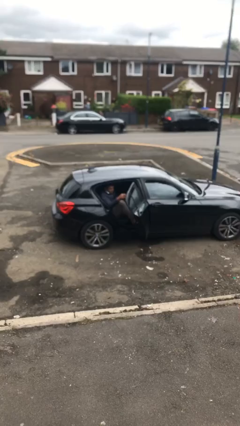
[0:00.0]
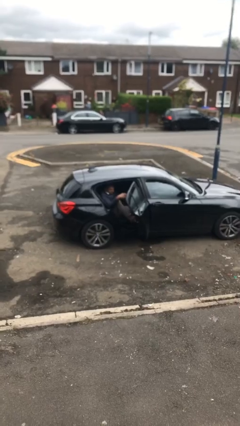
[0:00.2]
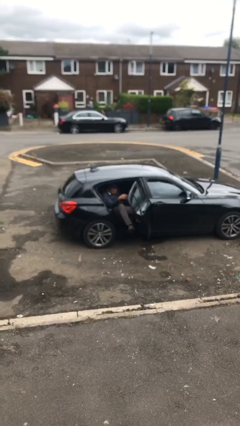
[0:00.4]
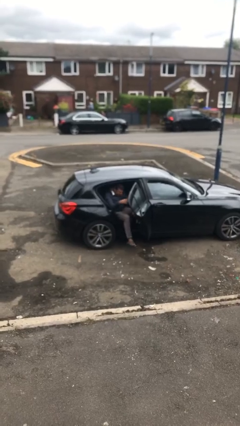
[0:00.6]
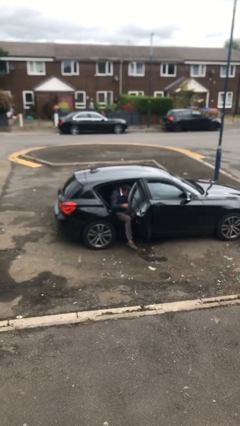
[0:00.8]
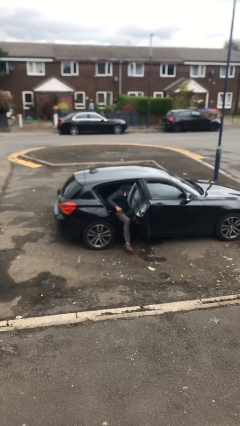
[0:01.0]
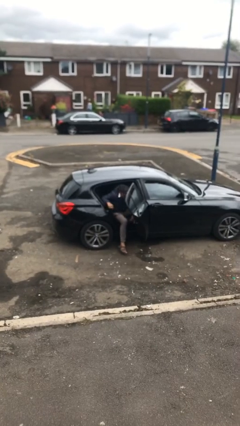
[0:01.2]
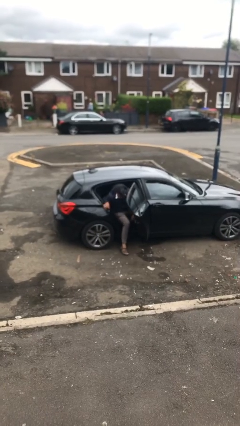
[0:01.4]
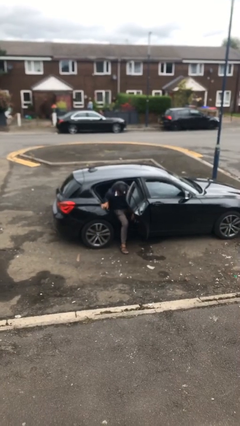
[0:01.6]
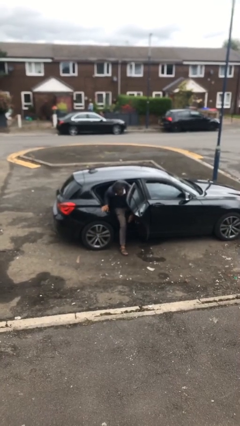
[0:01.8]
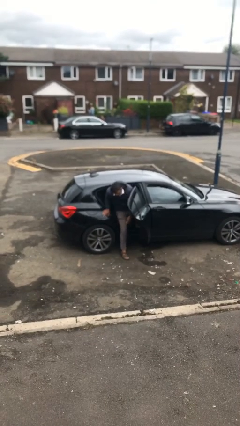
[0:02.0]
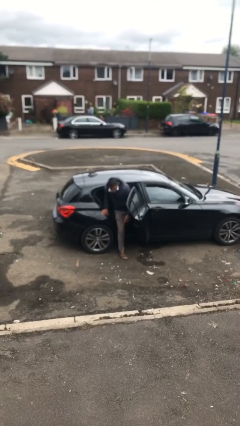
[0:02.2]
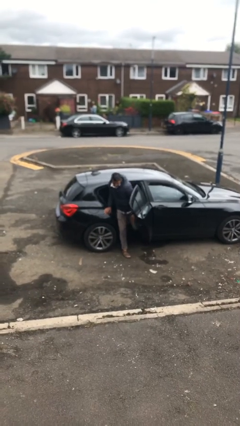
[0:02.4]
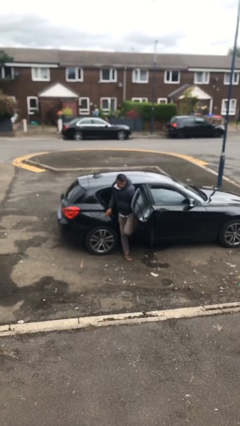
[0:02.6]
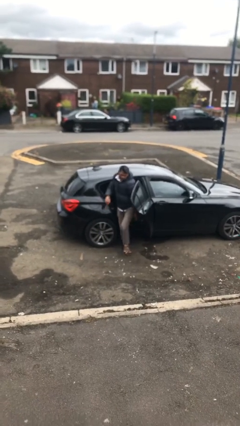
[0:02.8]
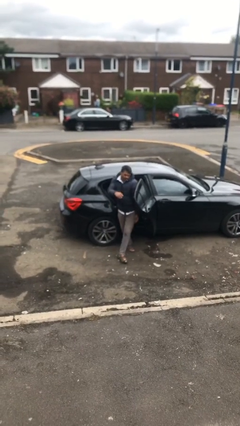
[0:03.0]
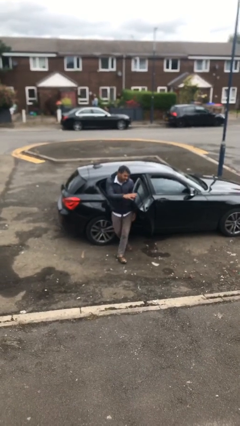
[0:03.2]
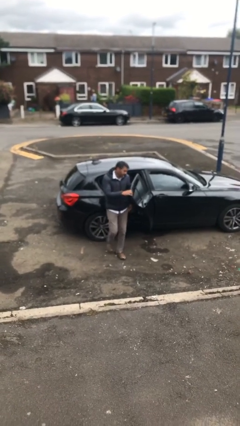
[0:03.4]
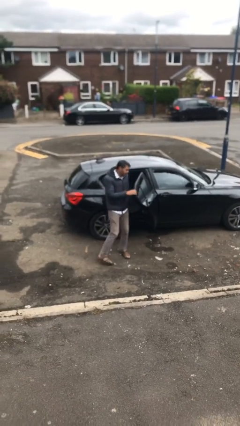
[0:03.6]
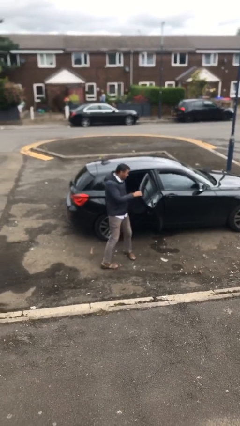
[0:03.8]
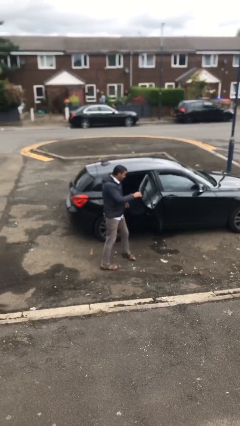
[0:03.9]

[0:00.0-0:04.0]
person exits car

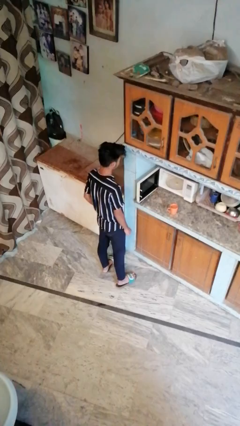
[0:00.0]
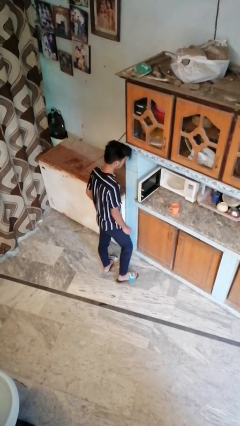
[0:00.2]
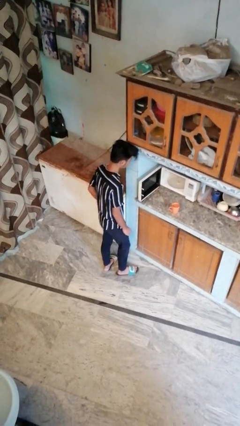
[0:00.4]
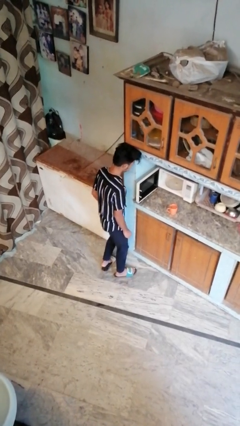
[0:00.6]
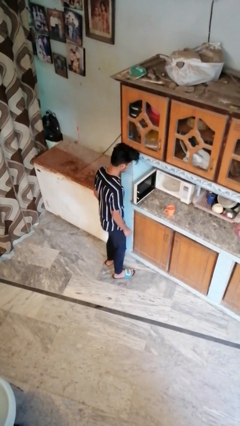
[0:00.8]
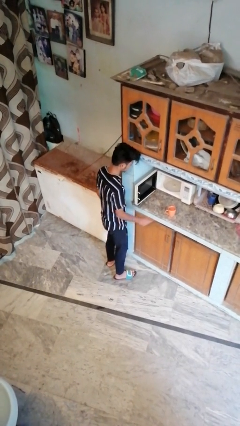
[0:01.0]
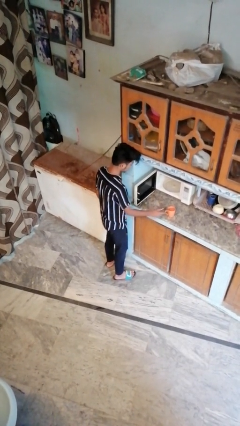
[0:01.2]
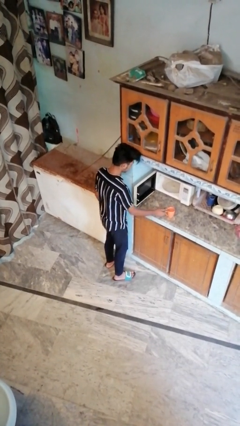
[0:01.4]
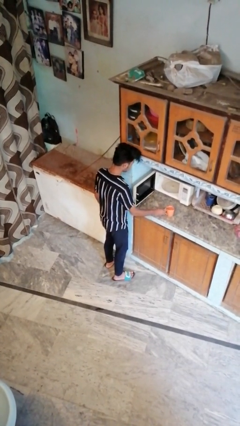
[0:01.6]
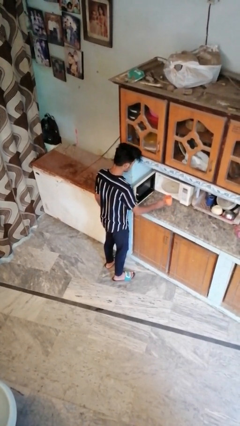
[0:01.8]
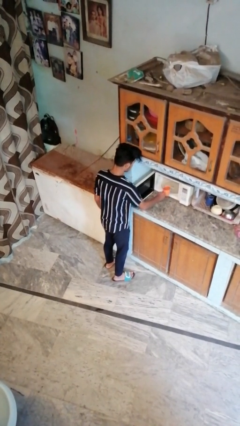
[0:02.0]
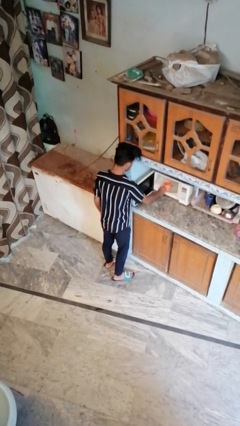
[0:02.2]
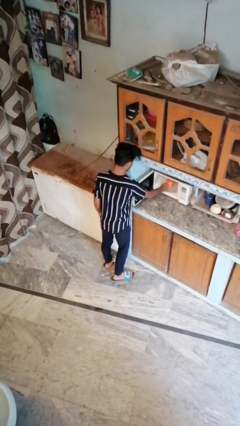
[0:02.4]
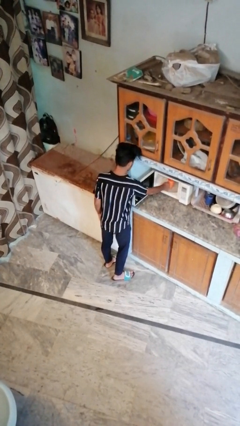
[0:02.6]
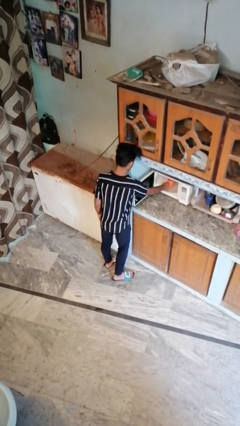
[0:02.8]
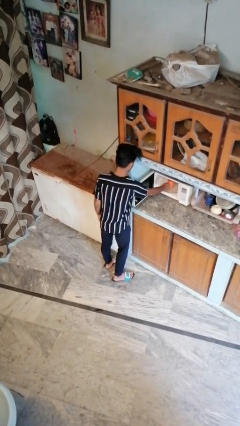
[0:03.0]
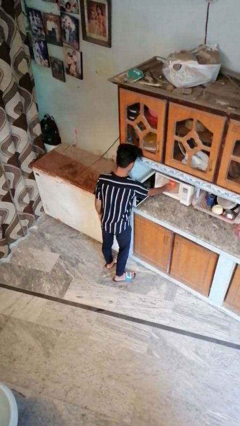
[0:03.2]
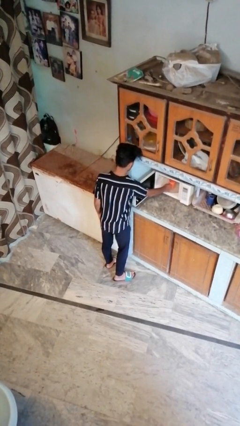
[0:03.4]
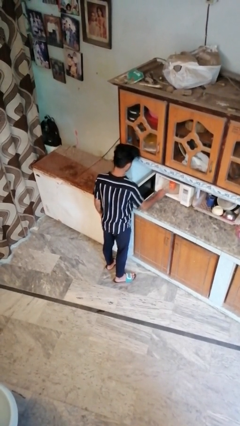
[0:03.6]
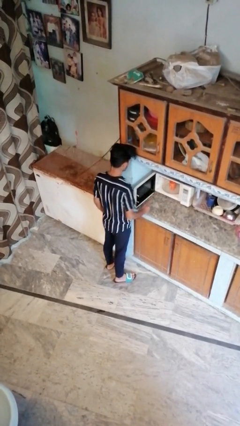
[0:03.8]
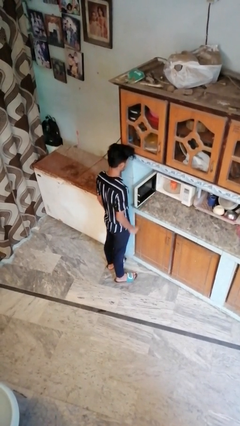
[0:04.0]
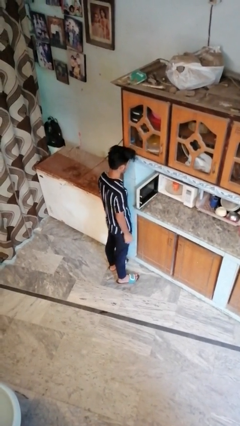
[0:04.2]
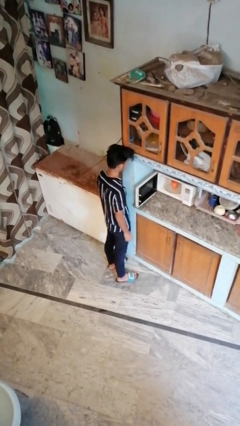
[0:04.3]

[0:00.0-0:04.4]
person puts object into microwave

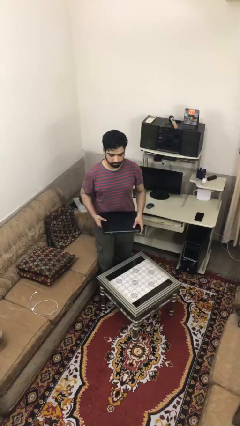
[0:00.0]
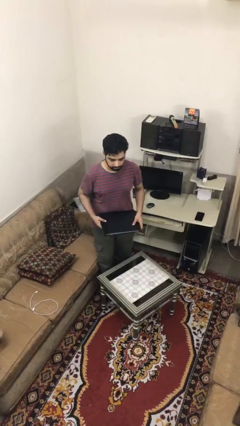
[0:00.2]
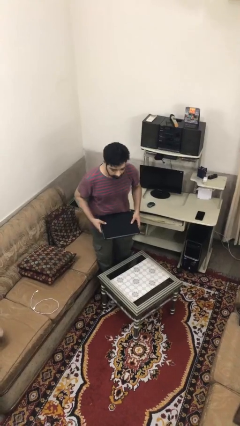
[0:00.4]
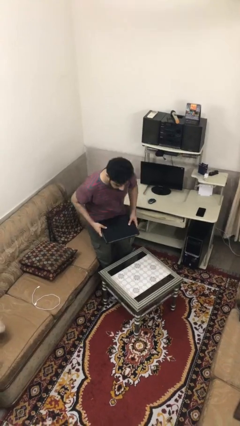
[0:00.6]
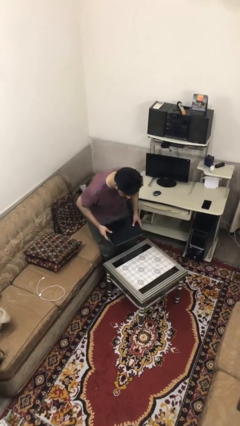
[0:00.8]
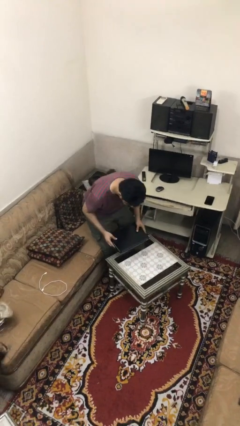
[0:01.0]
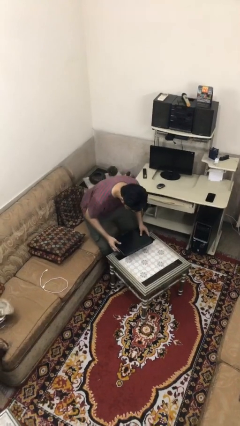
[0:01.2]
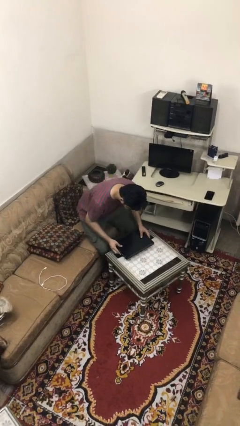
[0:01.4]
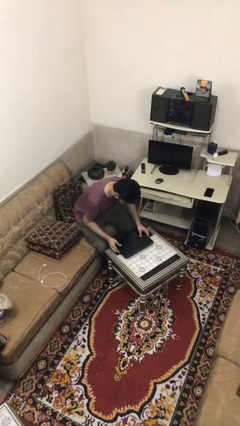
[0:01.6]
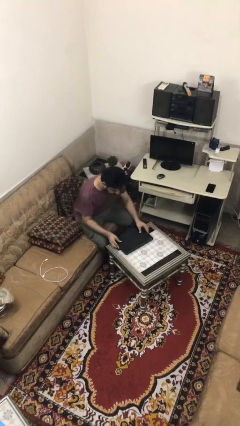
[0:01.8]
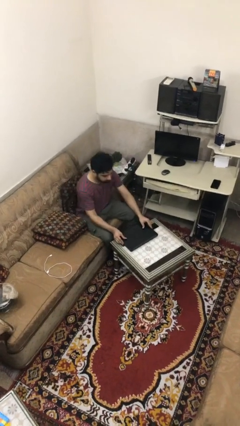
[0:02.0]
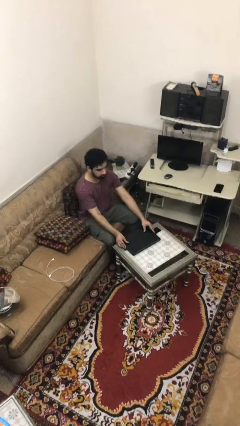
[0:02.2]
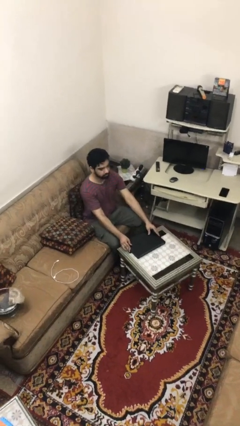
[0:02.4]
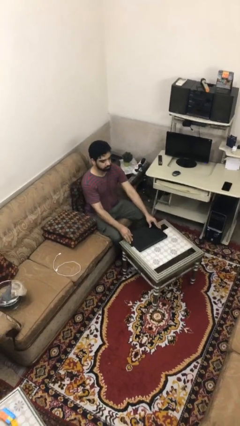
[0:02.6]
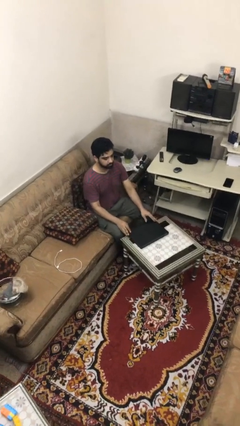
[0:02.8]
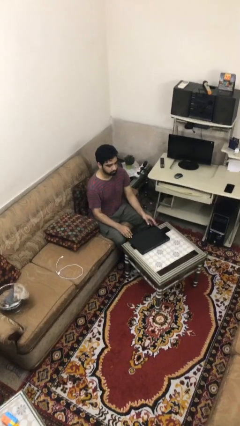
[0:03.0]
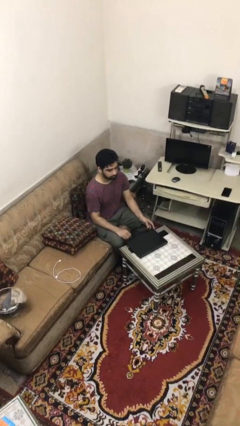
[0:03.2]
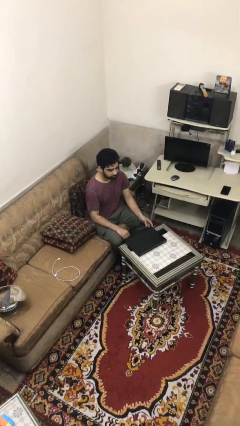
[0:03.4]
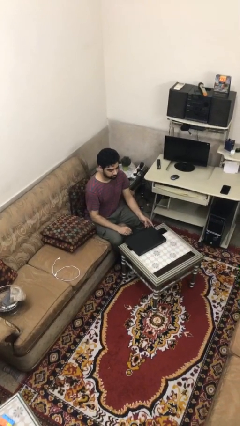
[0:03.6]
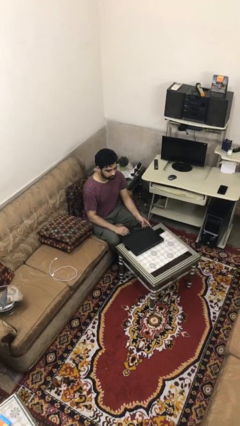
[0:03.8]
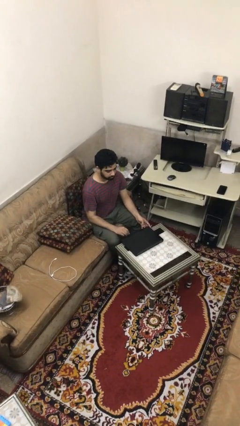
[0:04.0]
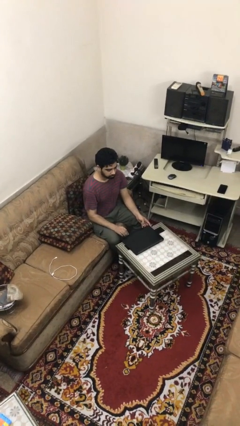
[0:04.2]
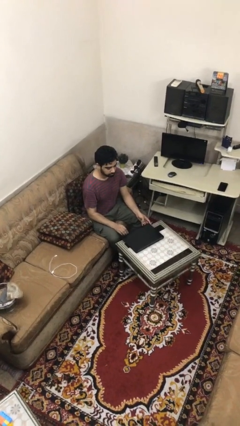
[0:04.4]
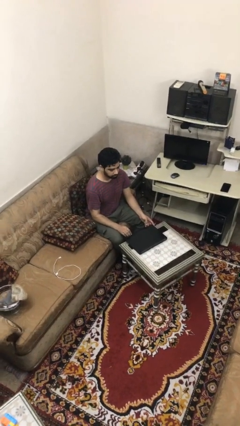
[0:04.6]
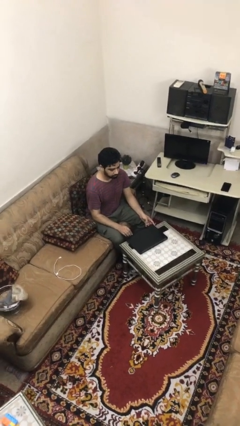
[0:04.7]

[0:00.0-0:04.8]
person sits down

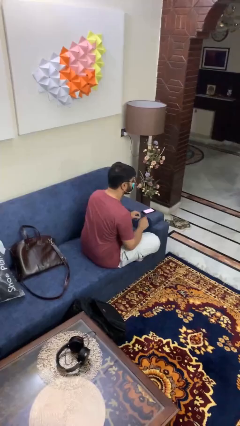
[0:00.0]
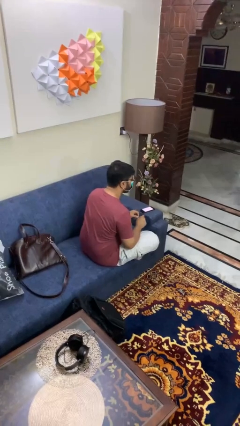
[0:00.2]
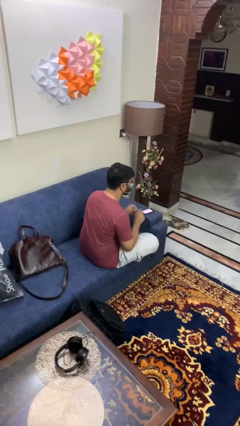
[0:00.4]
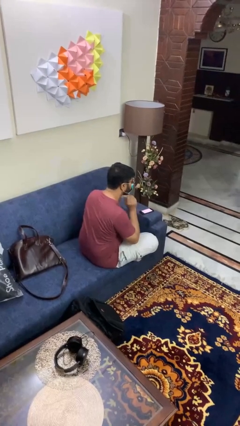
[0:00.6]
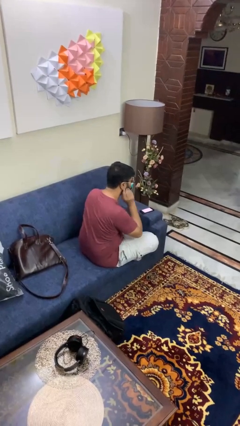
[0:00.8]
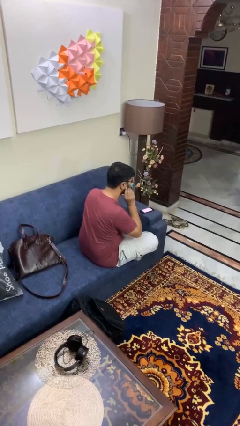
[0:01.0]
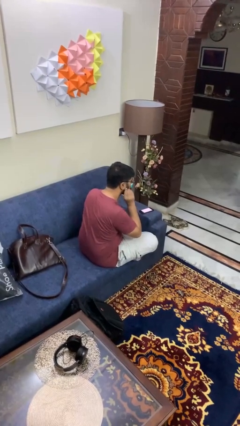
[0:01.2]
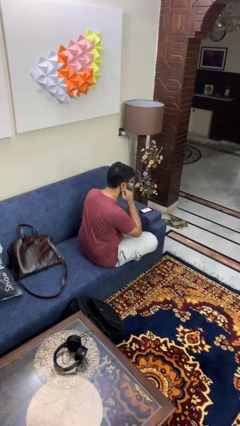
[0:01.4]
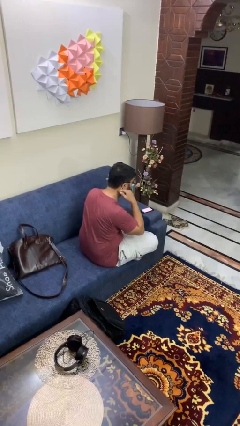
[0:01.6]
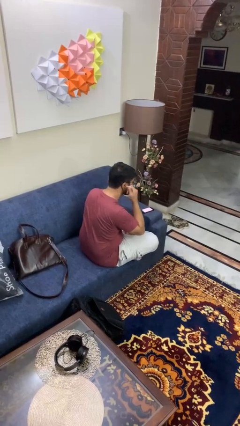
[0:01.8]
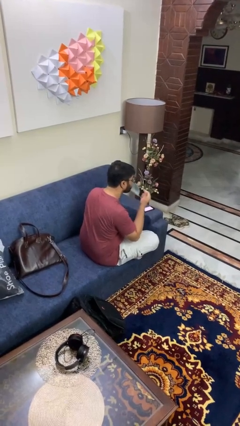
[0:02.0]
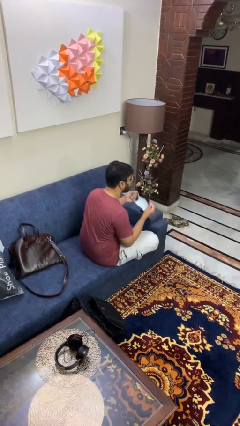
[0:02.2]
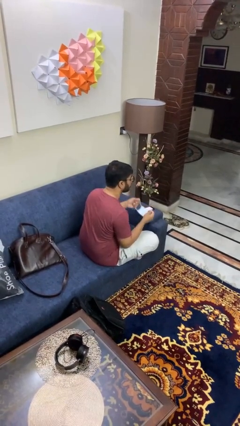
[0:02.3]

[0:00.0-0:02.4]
person takes off facemask

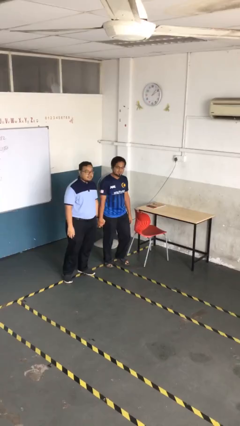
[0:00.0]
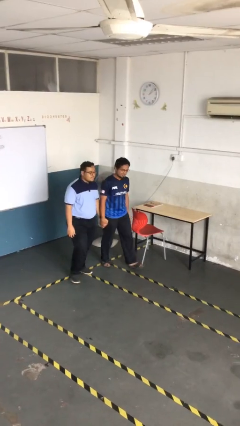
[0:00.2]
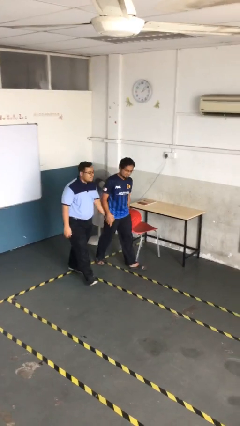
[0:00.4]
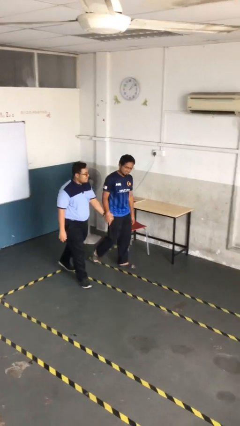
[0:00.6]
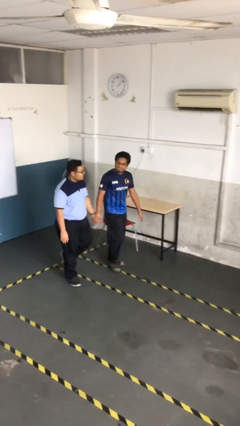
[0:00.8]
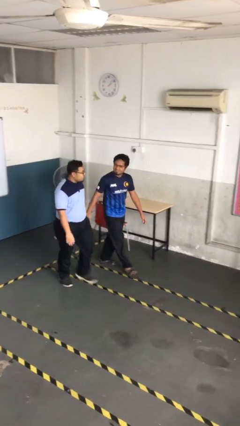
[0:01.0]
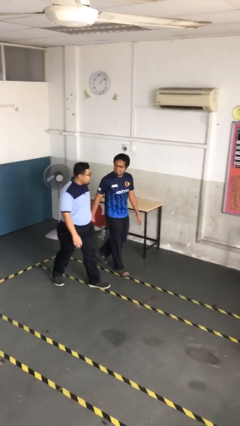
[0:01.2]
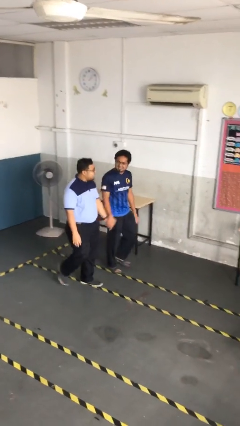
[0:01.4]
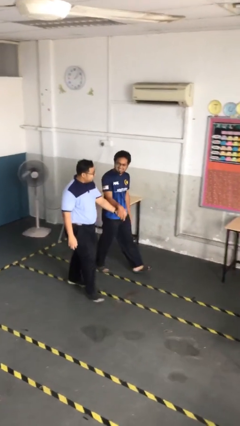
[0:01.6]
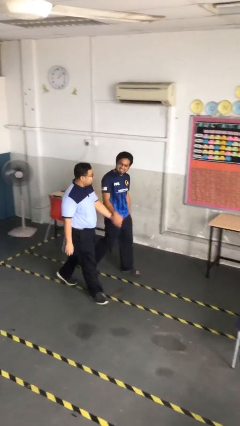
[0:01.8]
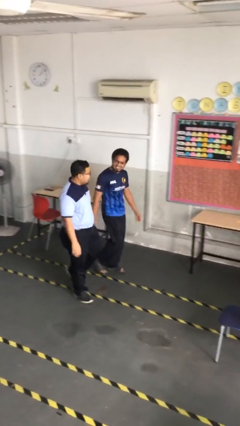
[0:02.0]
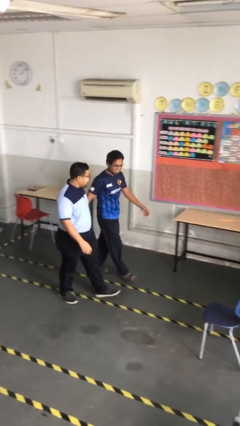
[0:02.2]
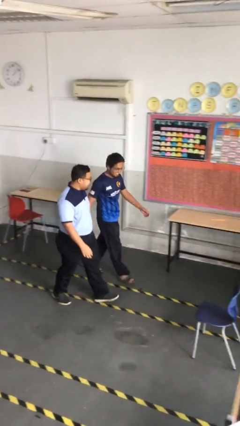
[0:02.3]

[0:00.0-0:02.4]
person holds hand
